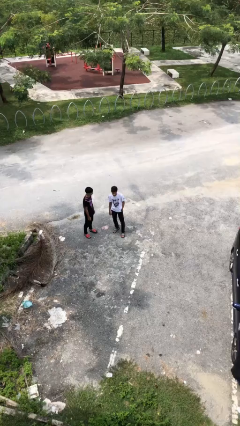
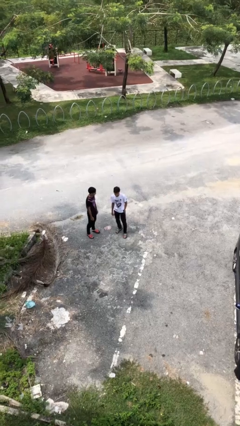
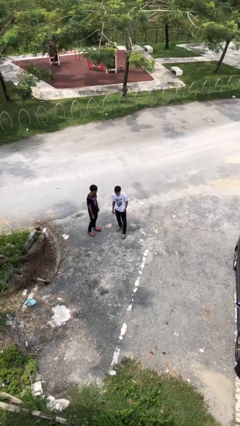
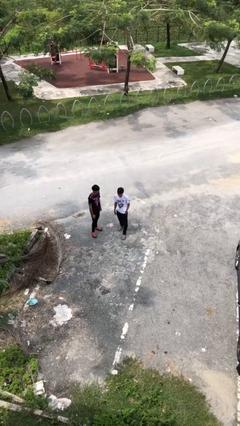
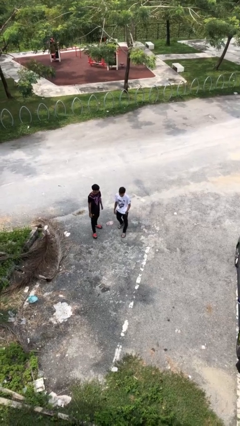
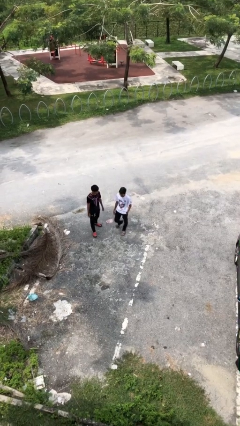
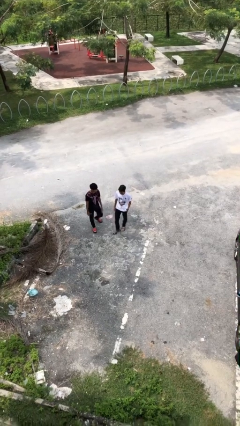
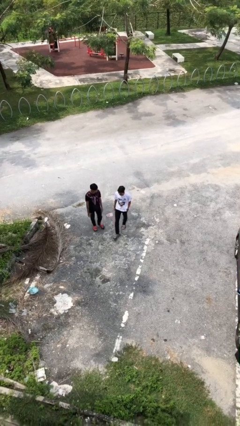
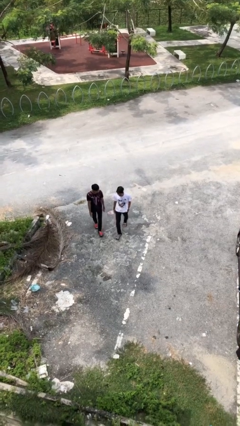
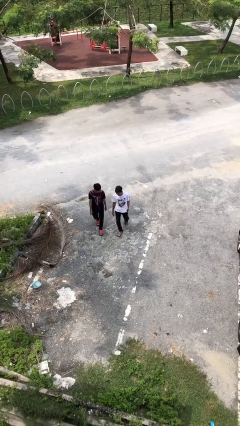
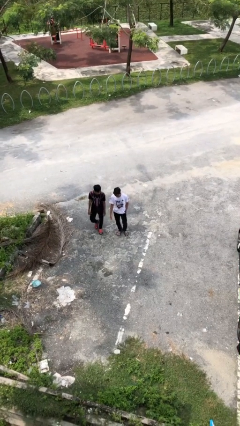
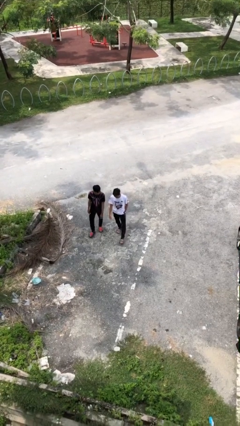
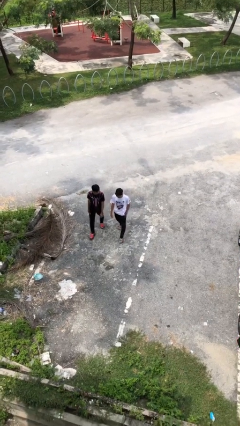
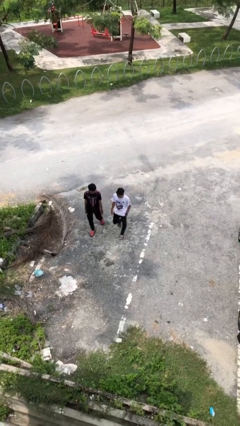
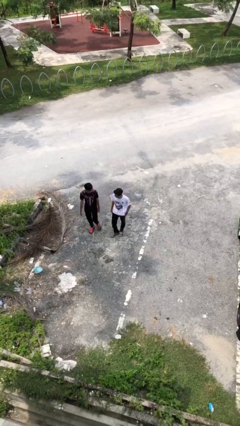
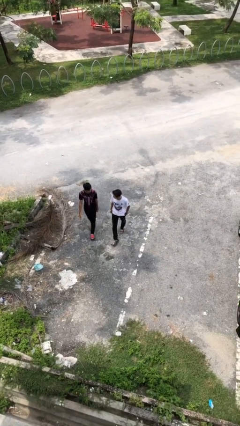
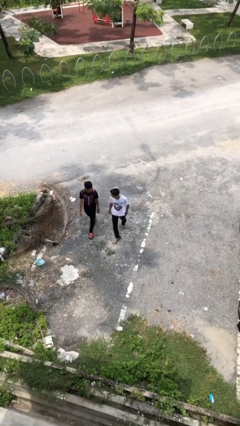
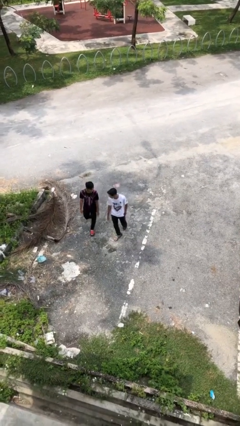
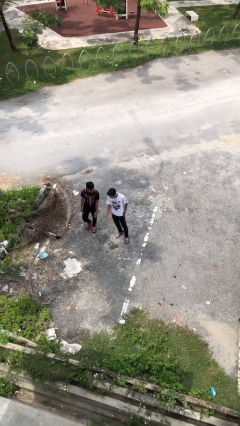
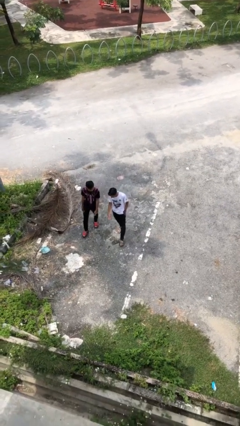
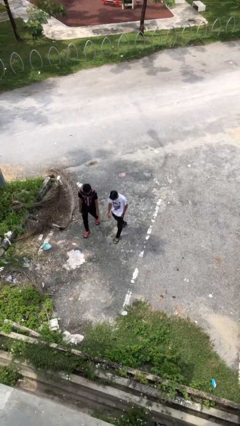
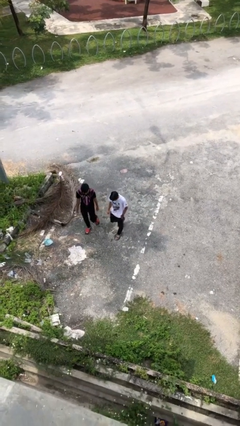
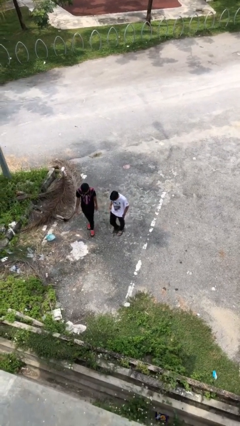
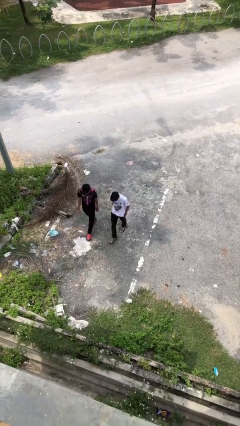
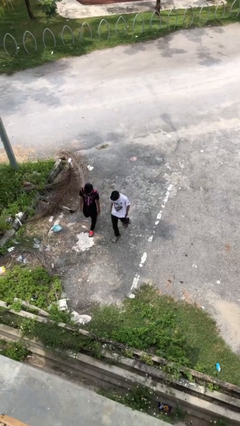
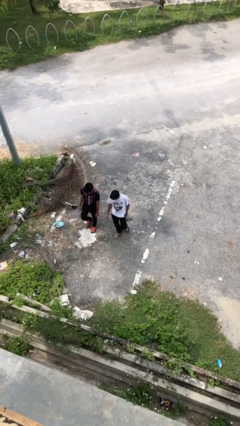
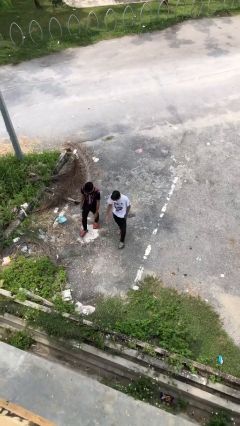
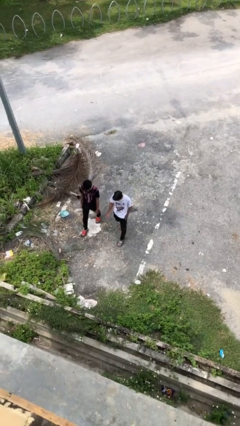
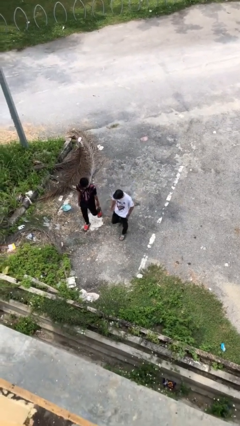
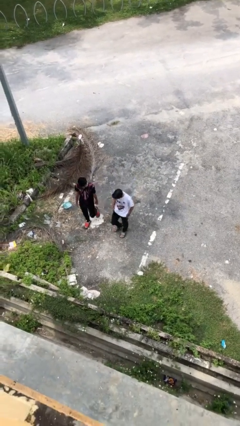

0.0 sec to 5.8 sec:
person talks to person

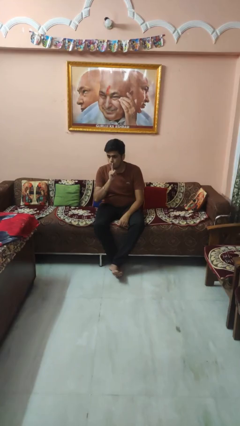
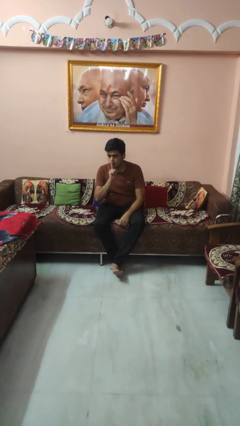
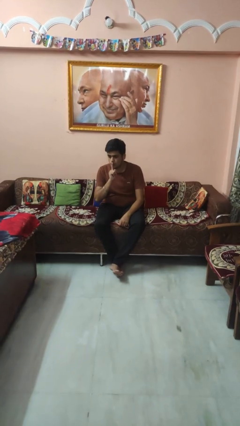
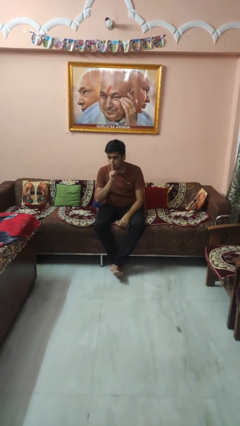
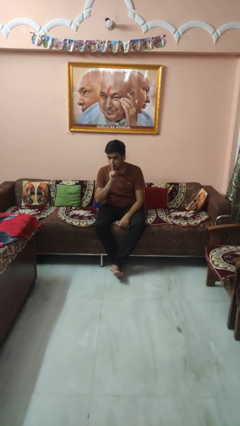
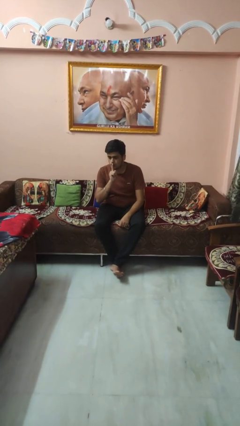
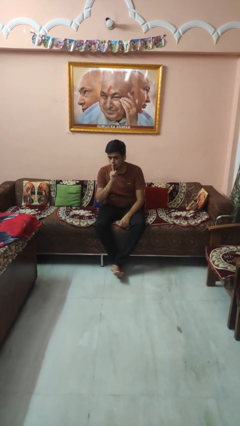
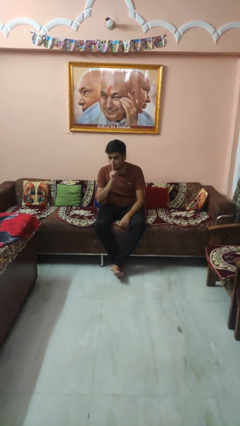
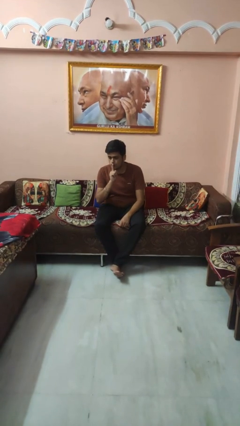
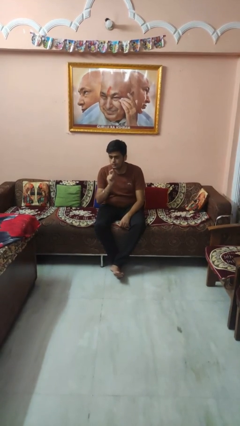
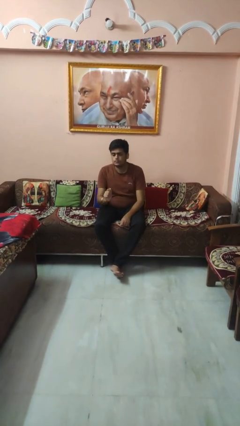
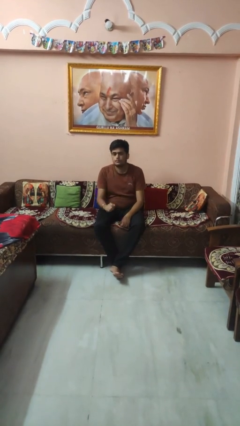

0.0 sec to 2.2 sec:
person gestures be quiet

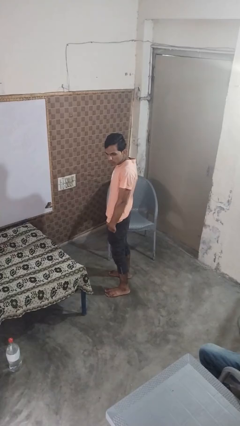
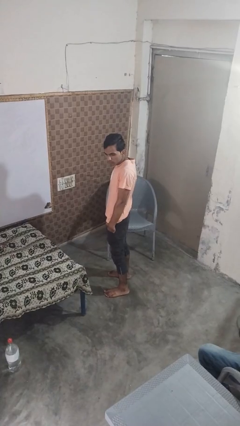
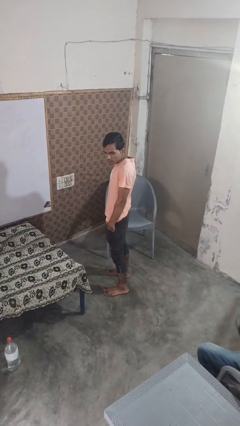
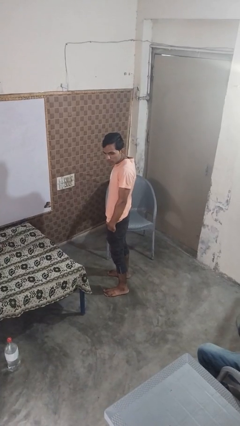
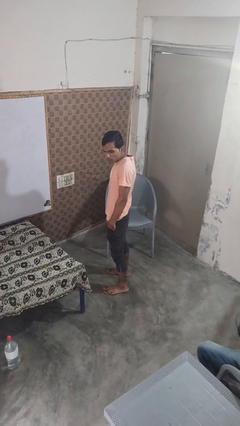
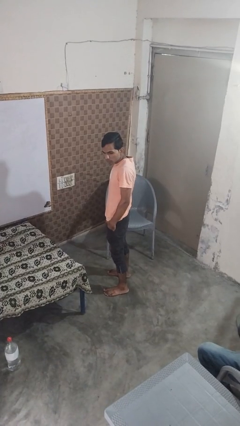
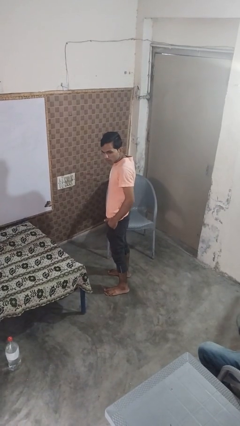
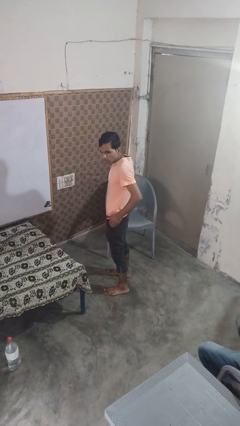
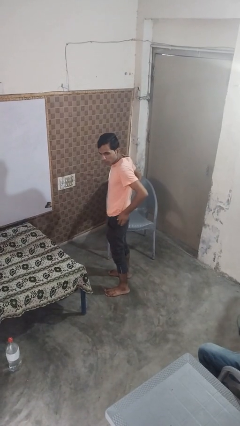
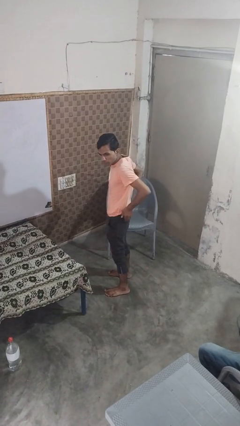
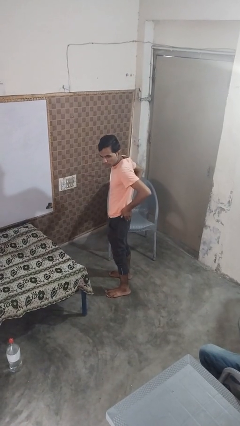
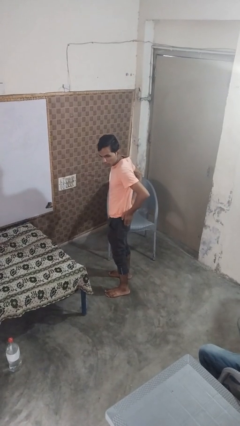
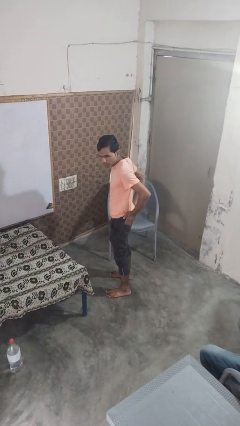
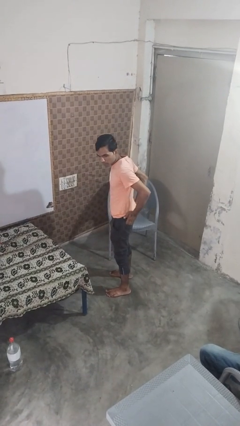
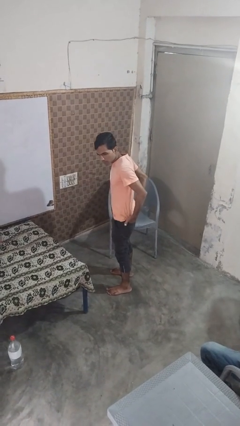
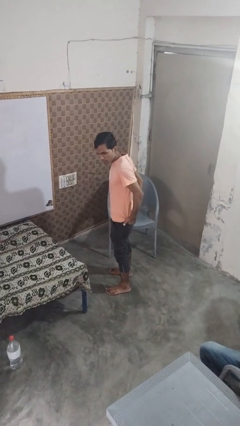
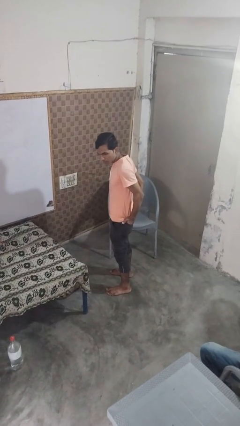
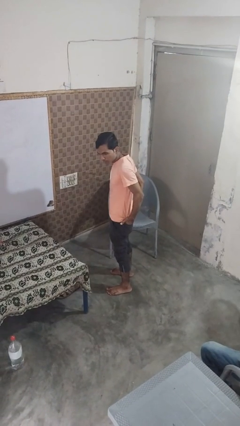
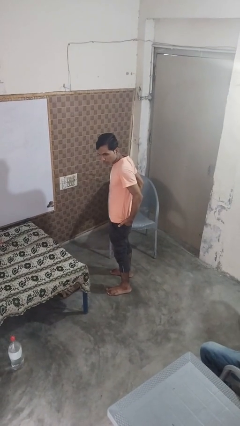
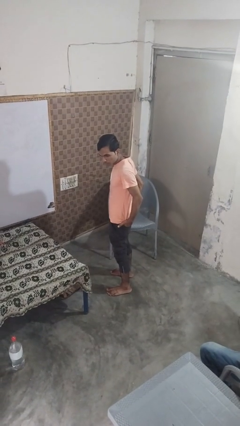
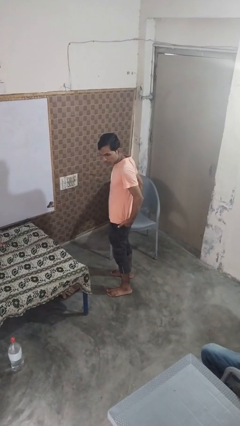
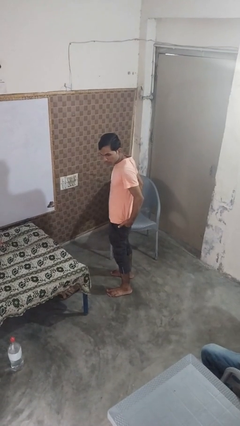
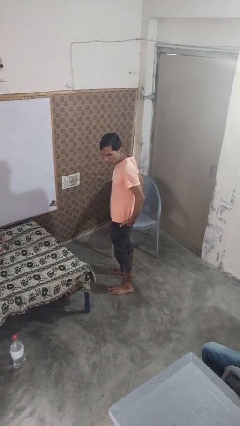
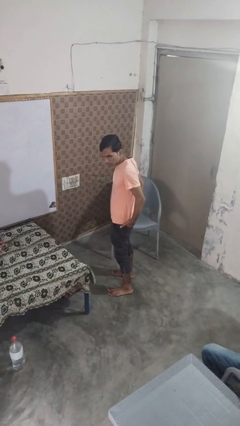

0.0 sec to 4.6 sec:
person puts hands in back pockets

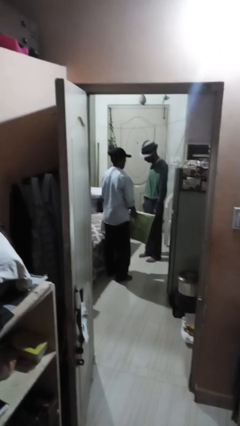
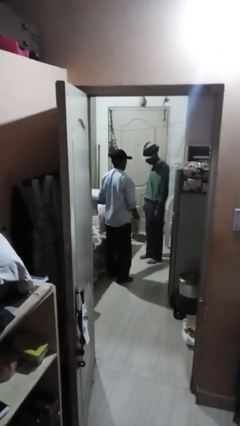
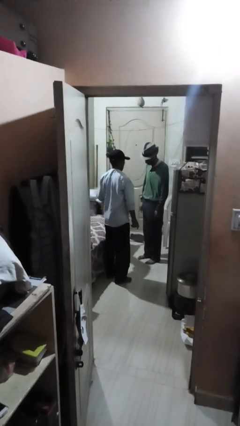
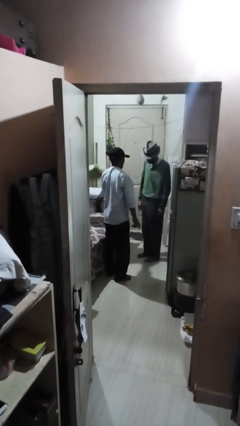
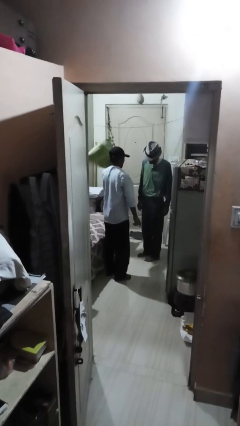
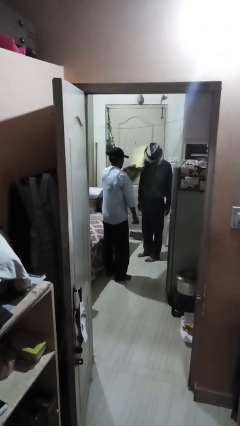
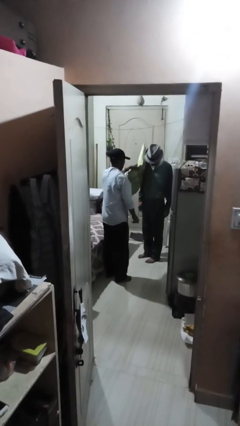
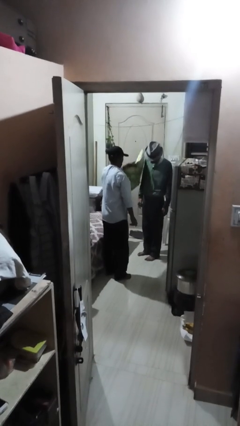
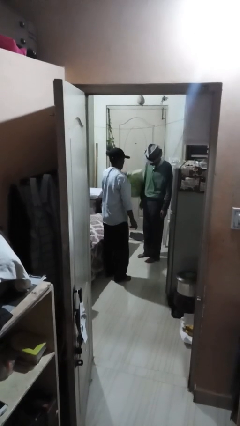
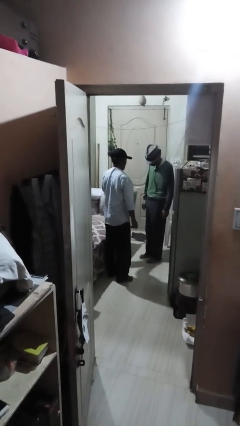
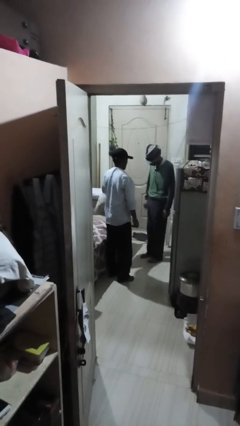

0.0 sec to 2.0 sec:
person hits person with pillow

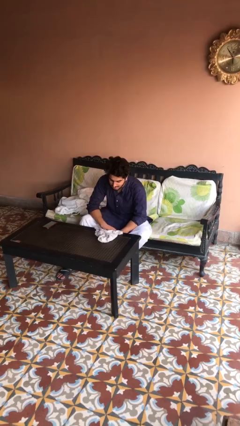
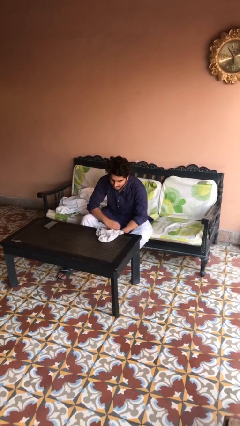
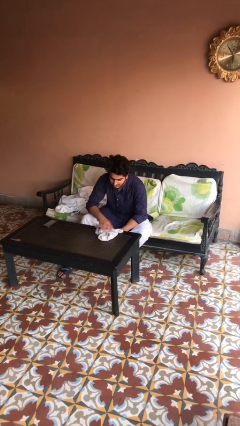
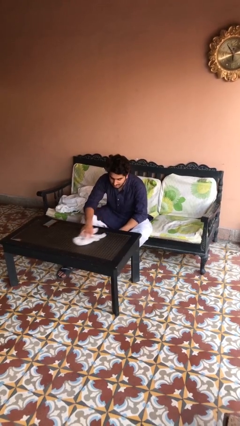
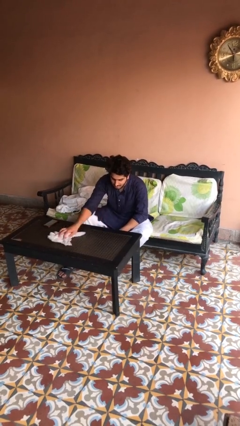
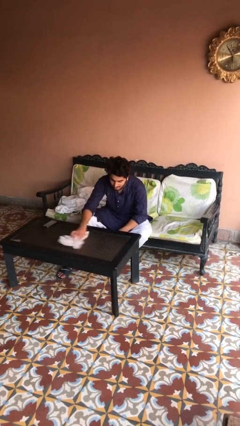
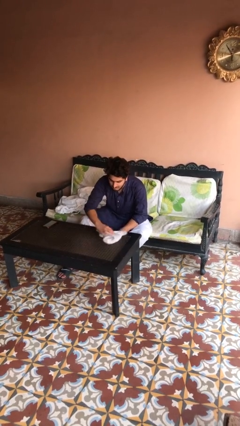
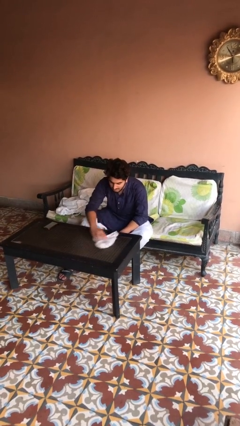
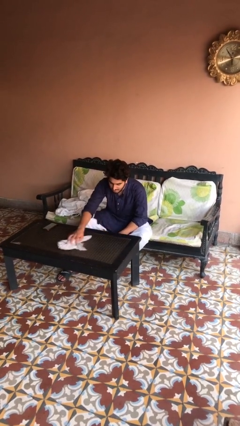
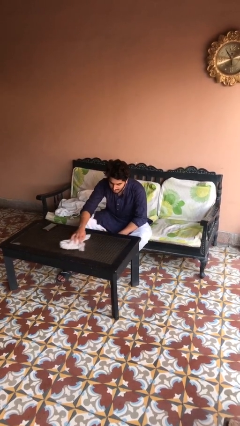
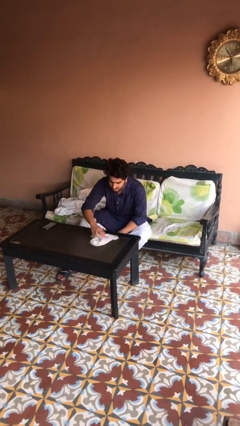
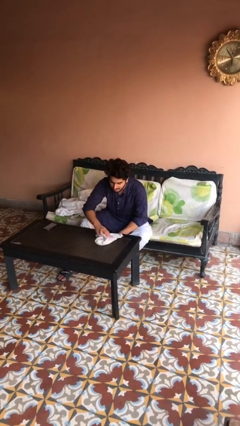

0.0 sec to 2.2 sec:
person cleans table with rag

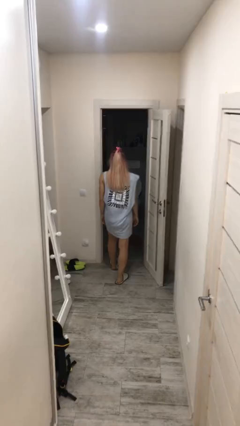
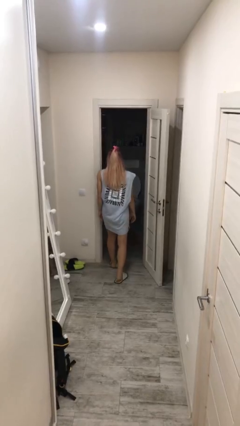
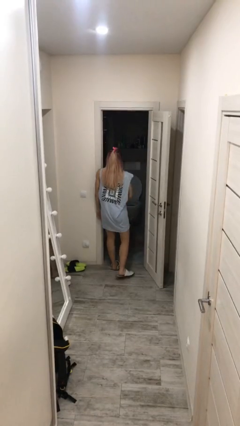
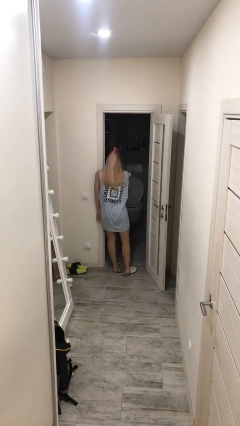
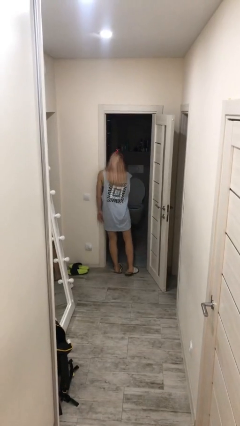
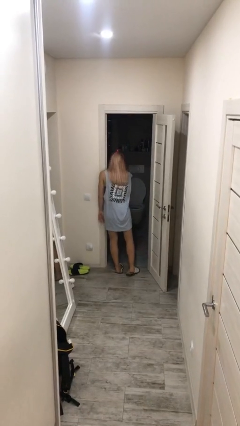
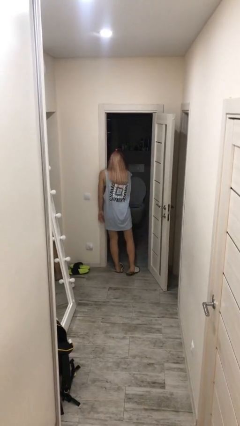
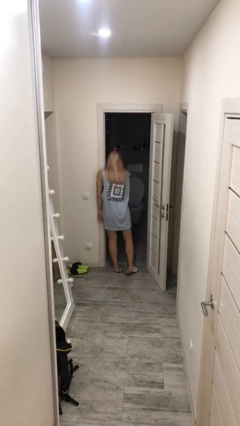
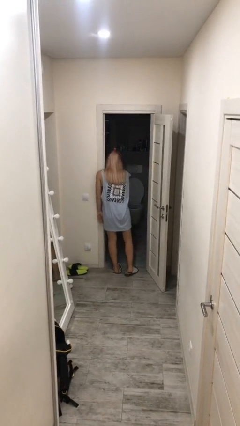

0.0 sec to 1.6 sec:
person bumps into wall
